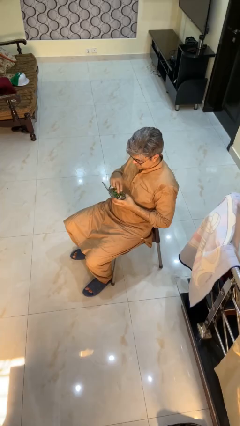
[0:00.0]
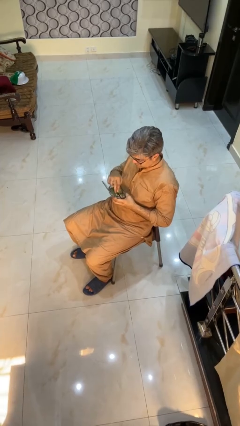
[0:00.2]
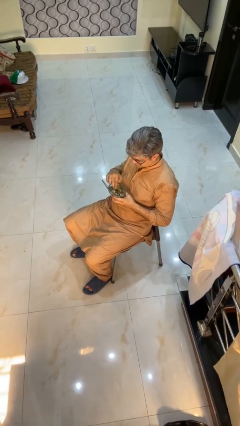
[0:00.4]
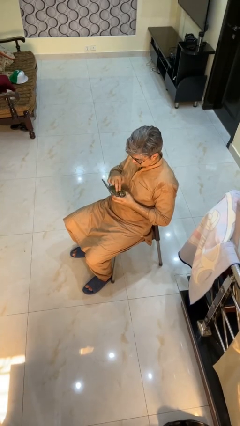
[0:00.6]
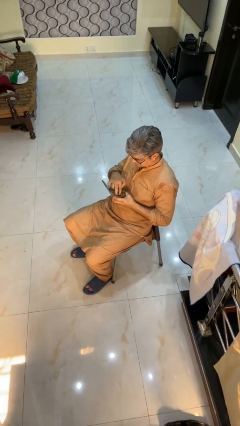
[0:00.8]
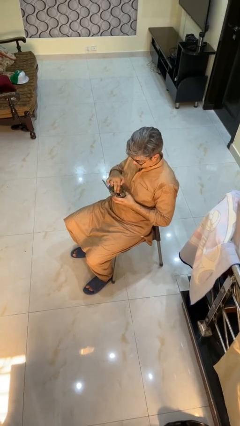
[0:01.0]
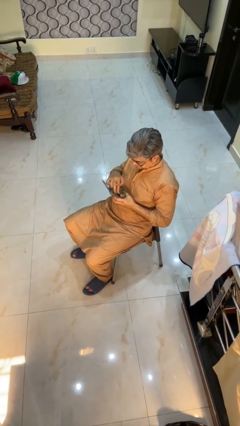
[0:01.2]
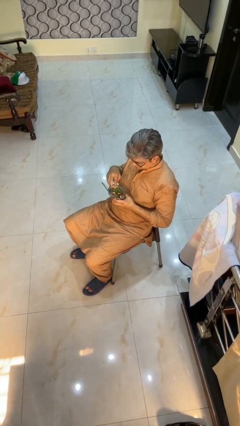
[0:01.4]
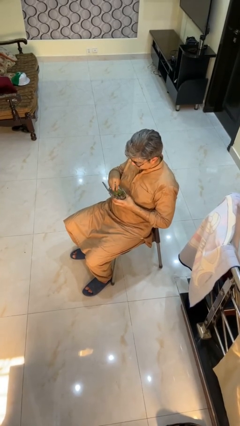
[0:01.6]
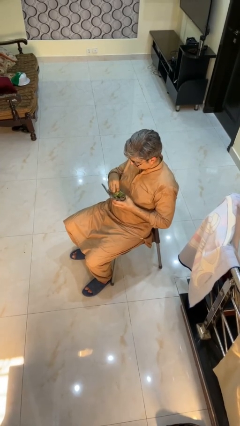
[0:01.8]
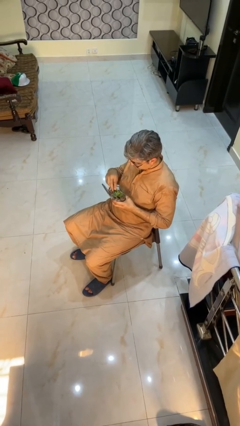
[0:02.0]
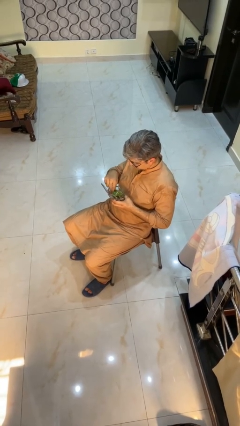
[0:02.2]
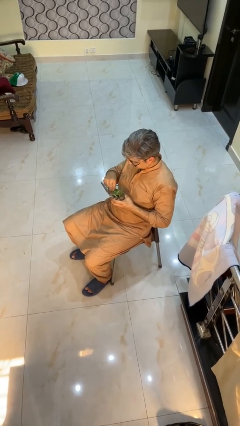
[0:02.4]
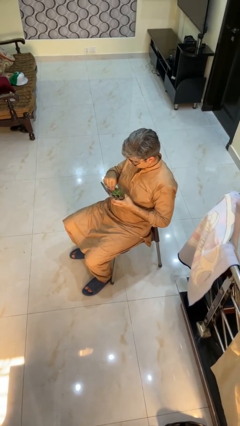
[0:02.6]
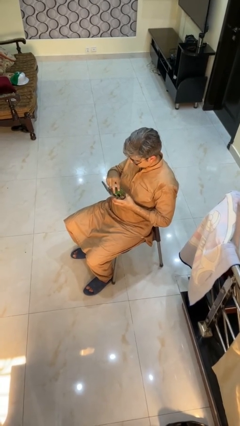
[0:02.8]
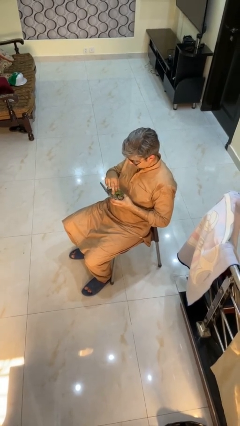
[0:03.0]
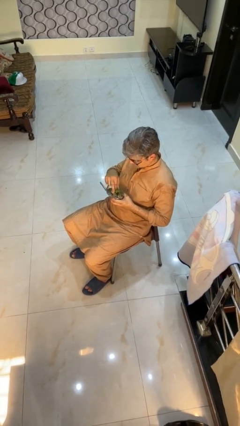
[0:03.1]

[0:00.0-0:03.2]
person searches jewelry box

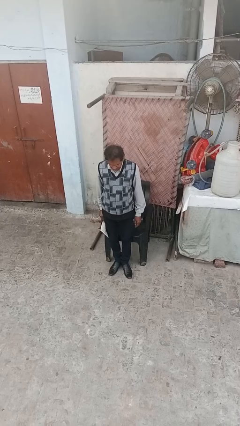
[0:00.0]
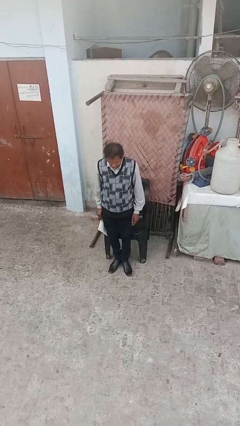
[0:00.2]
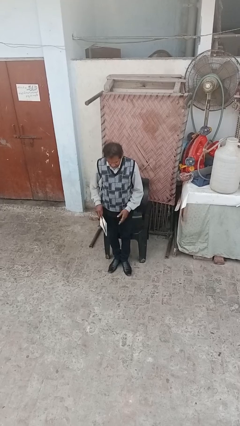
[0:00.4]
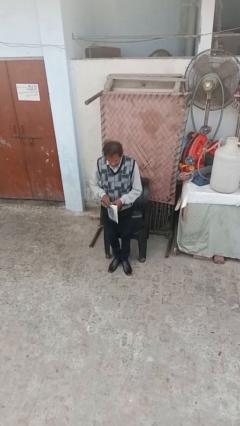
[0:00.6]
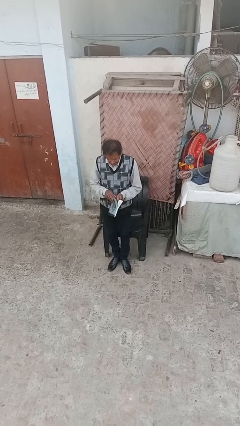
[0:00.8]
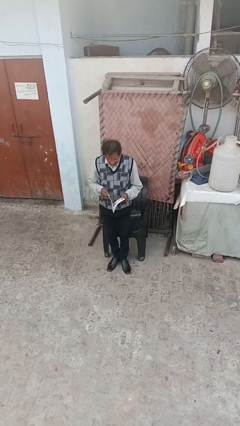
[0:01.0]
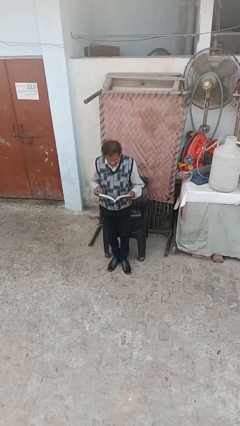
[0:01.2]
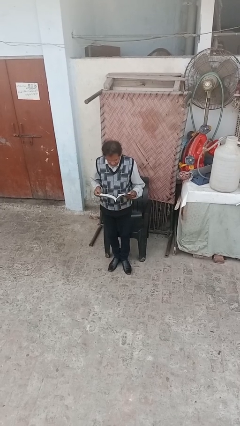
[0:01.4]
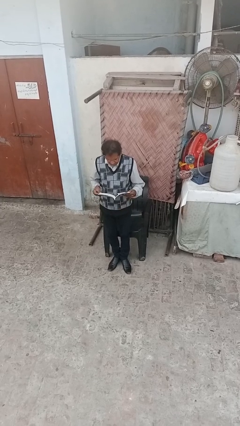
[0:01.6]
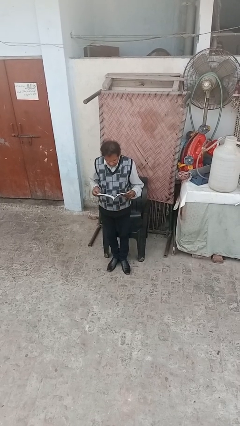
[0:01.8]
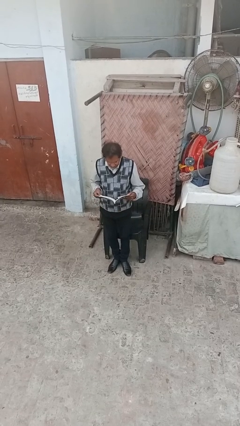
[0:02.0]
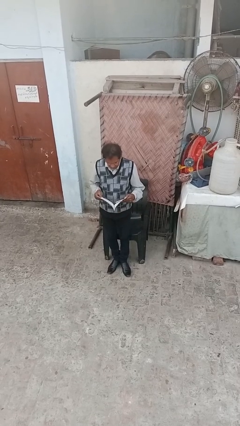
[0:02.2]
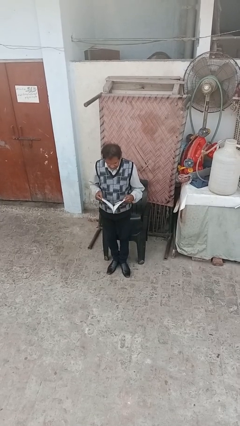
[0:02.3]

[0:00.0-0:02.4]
person reads document

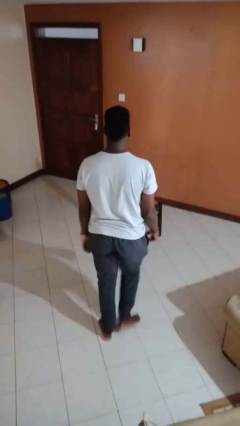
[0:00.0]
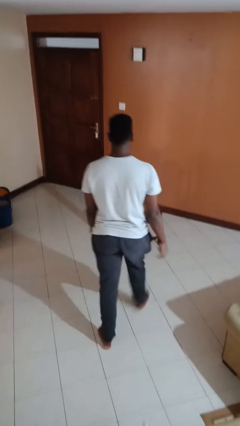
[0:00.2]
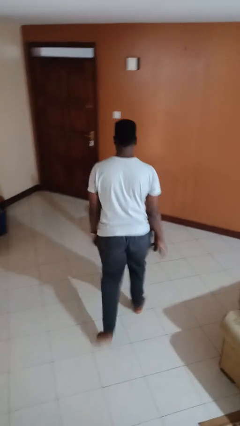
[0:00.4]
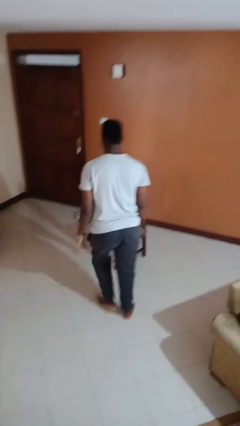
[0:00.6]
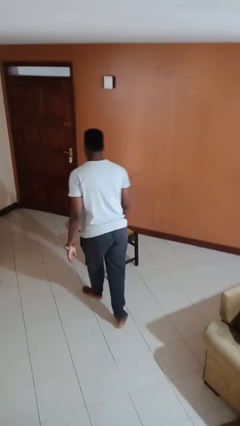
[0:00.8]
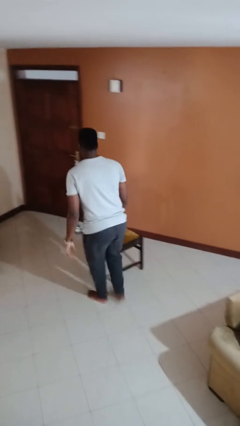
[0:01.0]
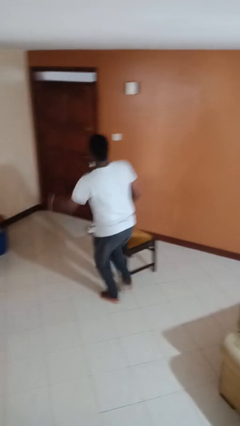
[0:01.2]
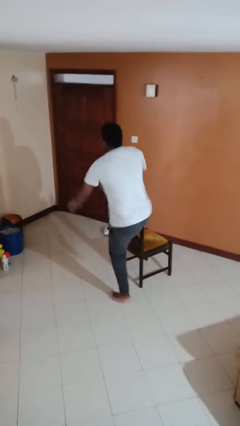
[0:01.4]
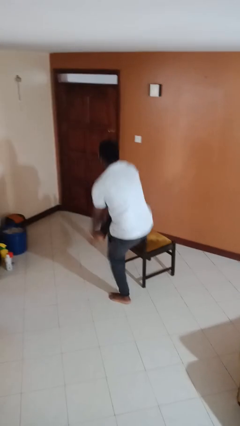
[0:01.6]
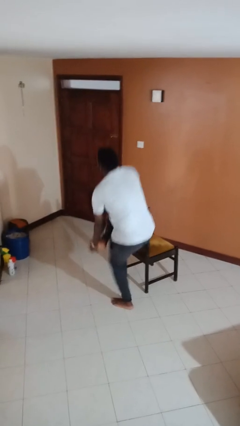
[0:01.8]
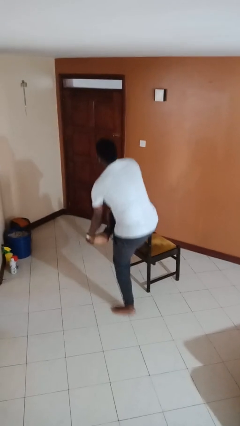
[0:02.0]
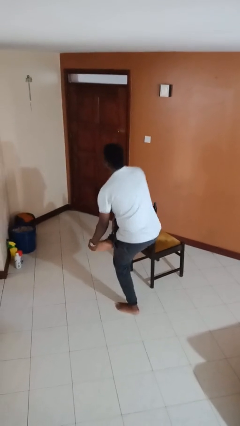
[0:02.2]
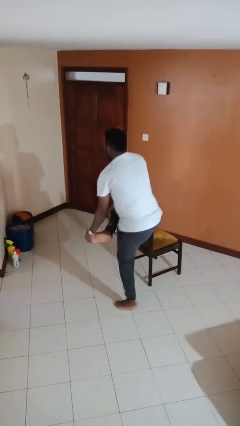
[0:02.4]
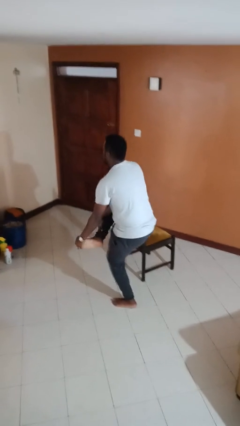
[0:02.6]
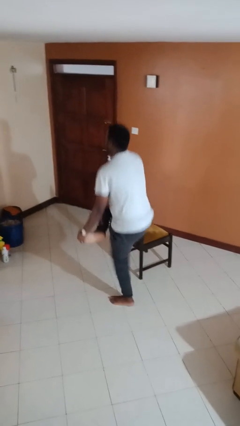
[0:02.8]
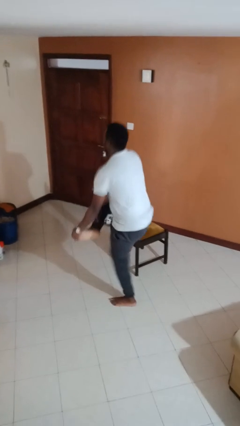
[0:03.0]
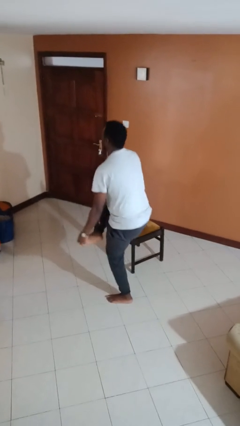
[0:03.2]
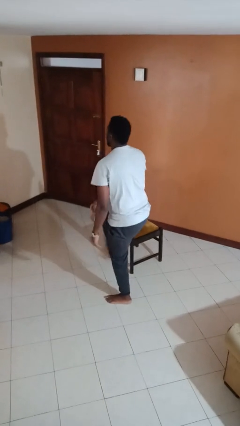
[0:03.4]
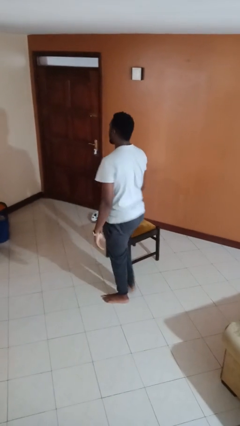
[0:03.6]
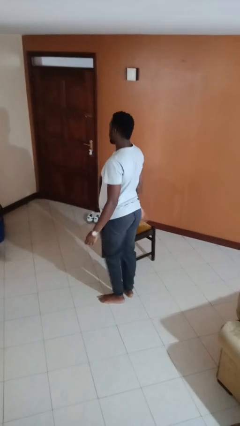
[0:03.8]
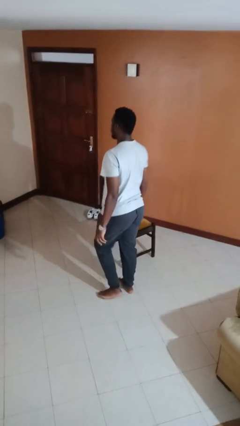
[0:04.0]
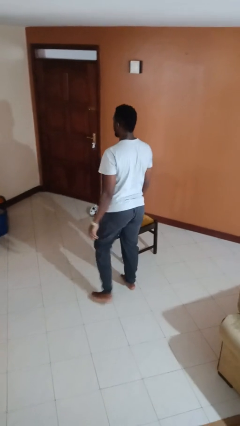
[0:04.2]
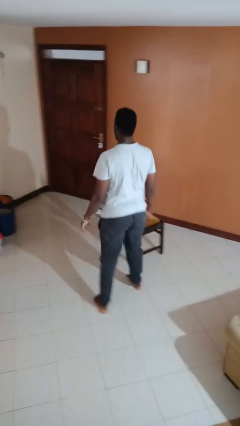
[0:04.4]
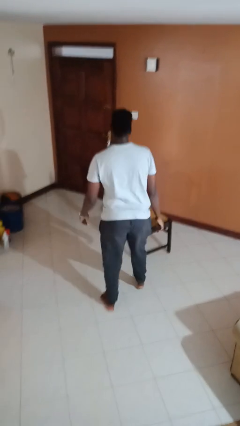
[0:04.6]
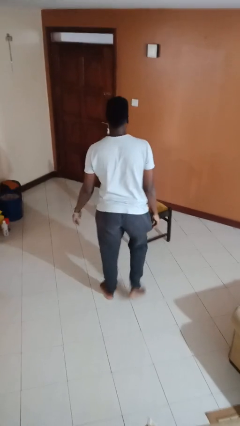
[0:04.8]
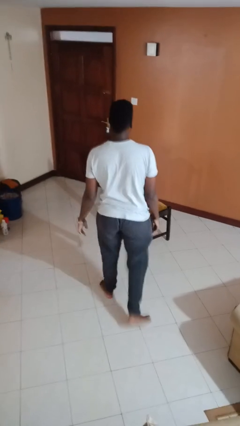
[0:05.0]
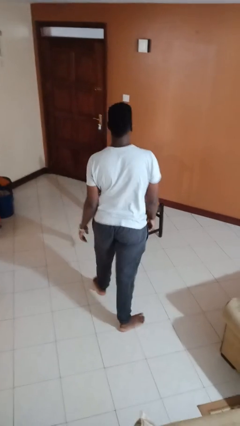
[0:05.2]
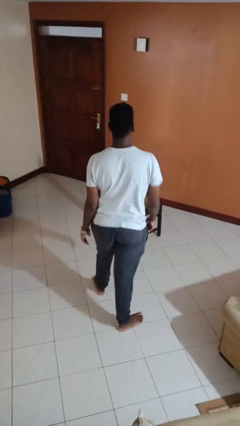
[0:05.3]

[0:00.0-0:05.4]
person stubs toe

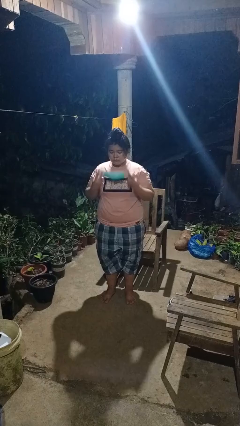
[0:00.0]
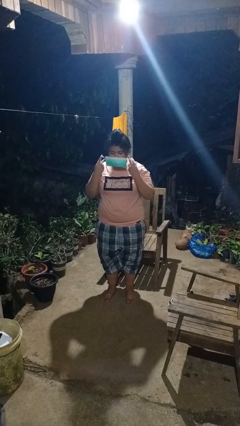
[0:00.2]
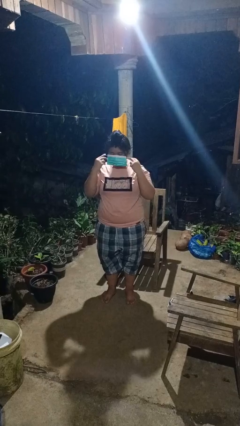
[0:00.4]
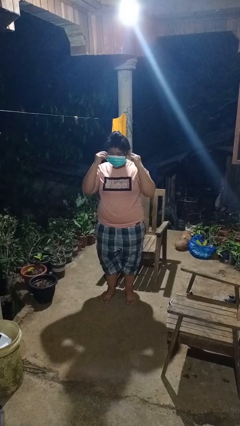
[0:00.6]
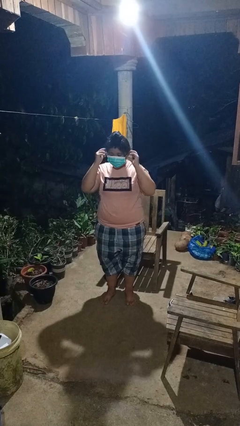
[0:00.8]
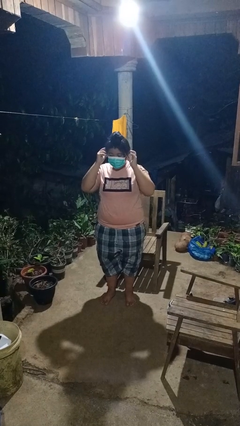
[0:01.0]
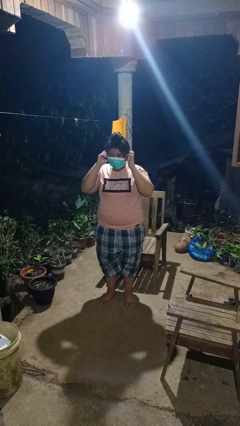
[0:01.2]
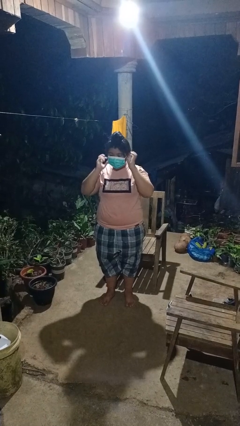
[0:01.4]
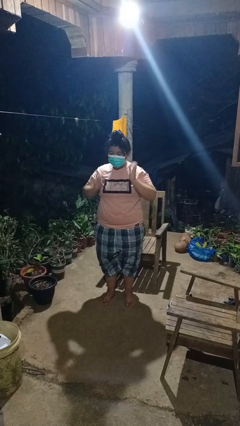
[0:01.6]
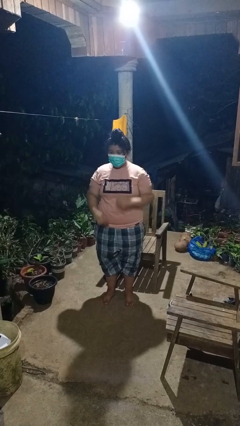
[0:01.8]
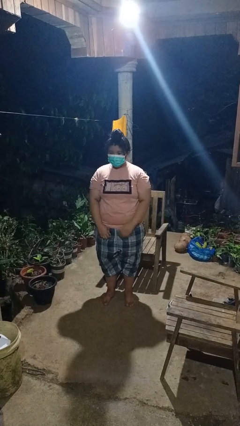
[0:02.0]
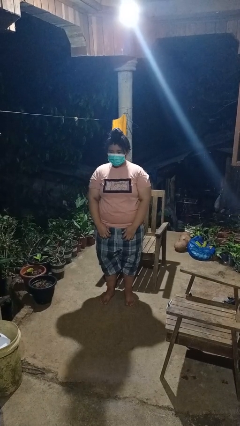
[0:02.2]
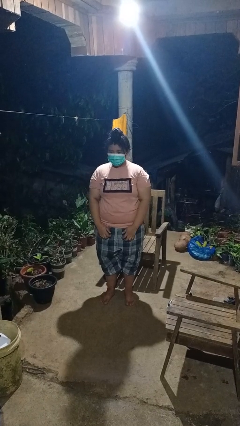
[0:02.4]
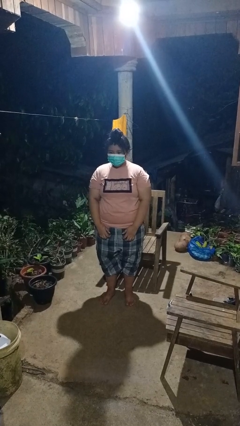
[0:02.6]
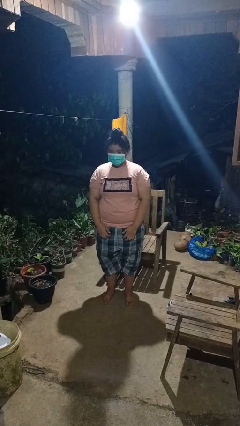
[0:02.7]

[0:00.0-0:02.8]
person puts on facemask

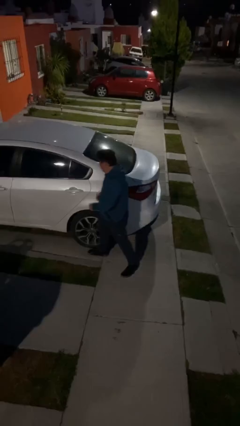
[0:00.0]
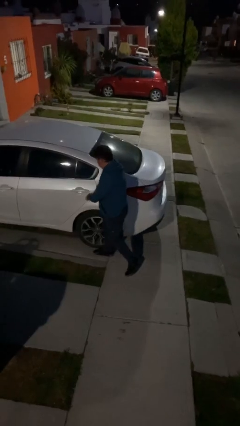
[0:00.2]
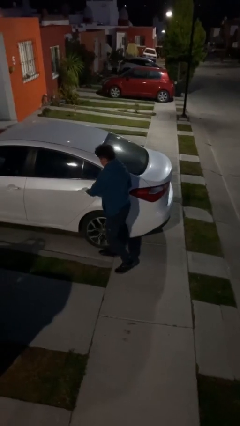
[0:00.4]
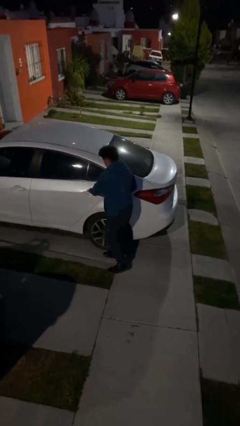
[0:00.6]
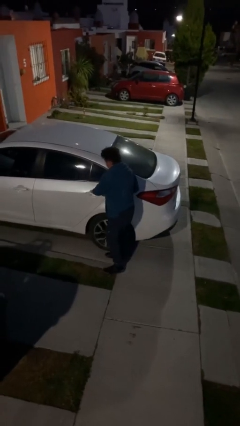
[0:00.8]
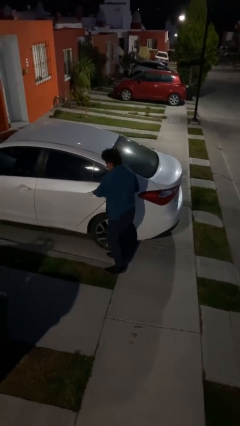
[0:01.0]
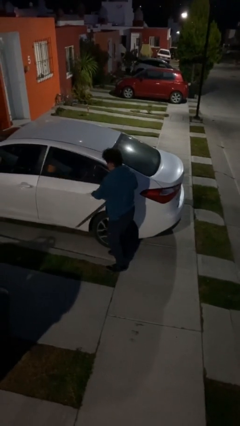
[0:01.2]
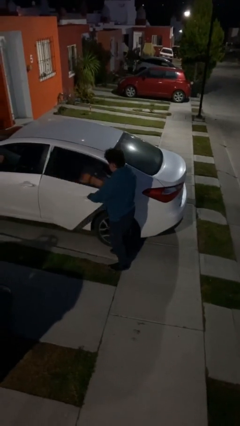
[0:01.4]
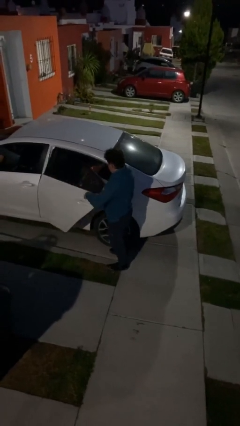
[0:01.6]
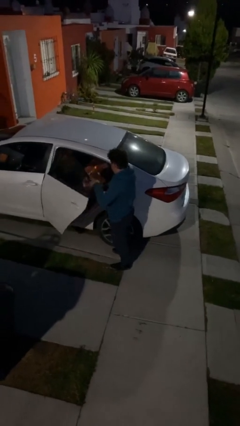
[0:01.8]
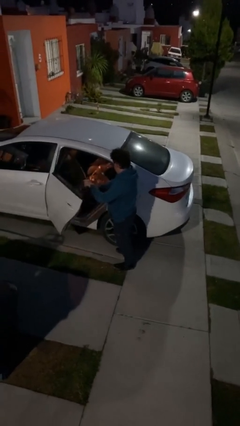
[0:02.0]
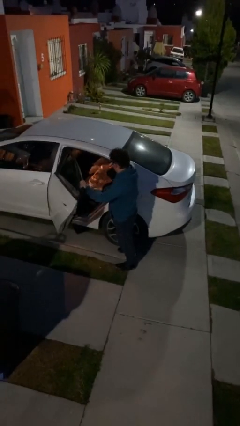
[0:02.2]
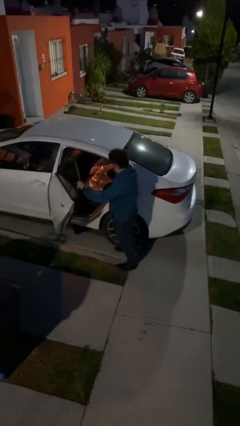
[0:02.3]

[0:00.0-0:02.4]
person opens car door

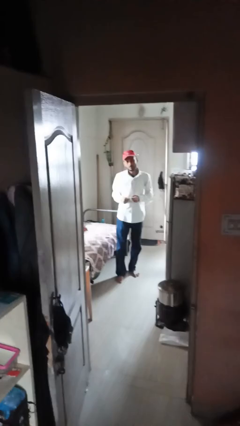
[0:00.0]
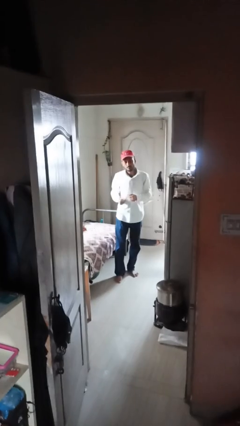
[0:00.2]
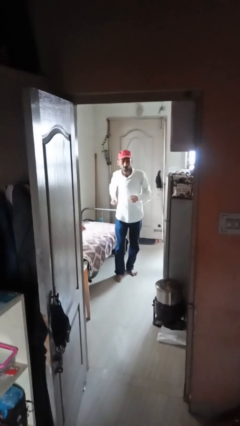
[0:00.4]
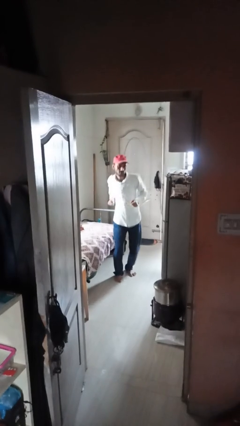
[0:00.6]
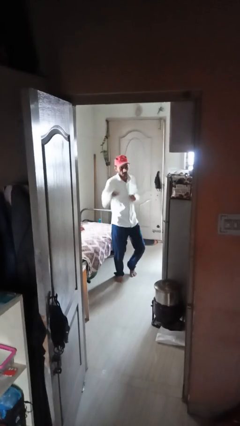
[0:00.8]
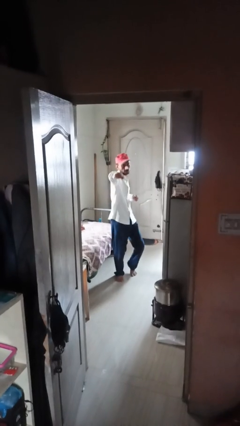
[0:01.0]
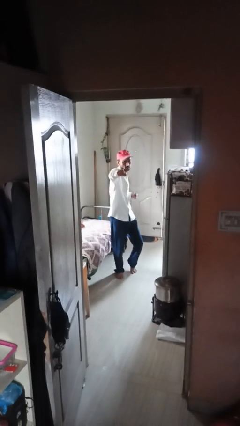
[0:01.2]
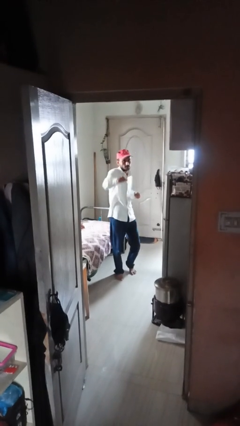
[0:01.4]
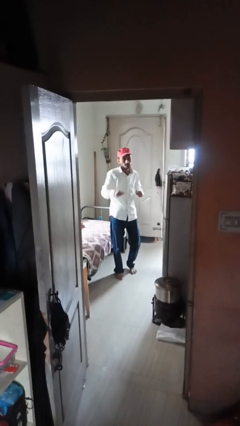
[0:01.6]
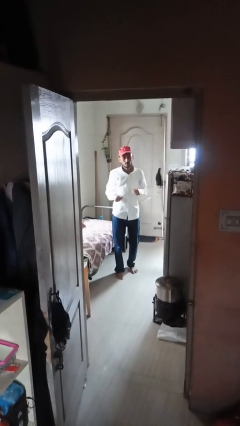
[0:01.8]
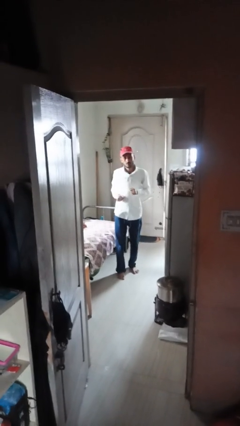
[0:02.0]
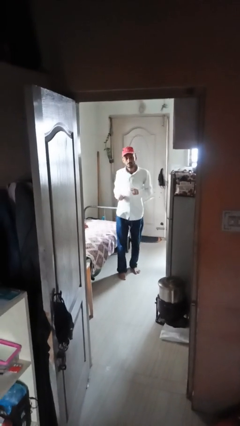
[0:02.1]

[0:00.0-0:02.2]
person punches
